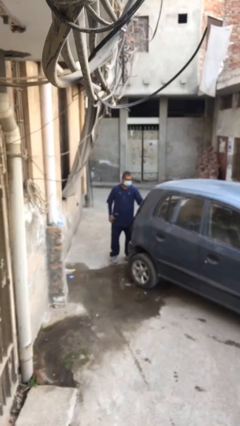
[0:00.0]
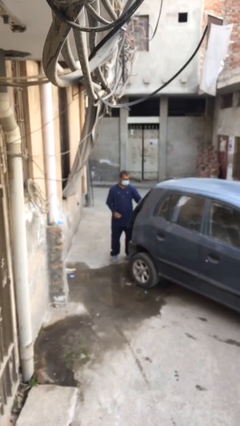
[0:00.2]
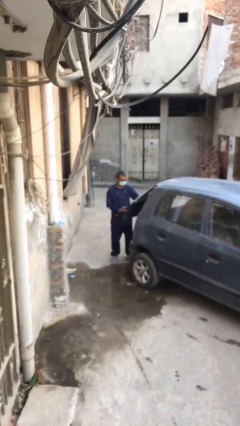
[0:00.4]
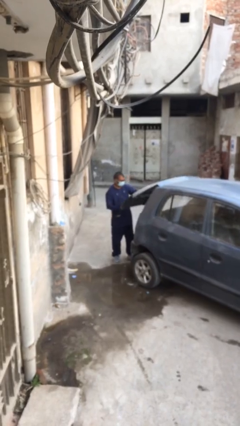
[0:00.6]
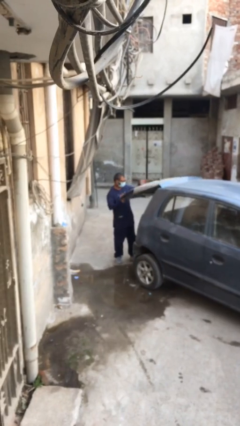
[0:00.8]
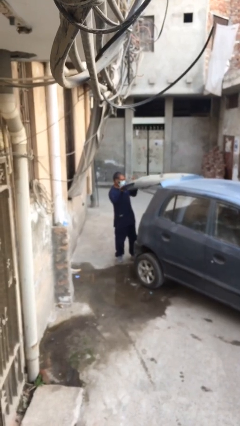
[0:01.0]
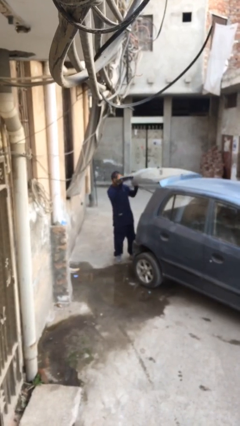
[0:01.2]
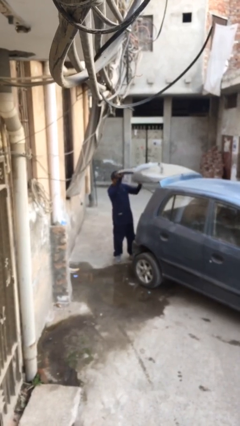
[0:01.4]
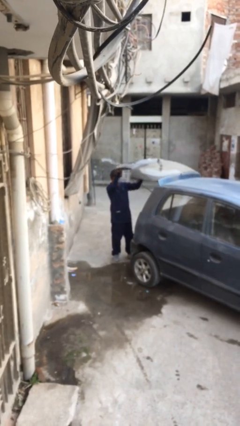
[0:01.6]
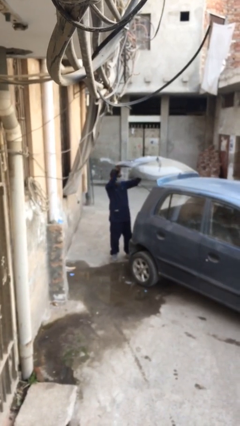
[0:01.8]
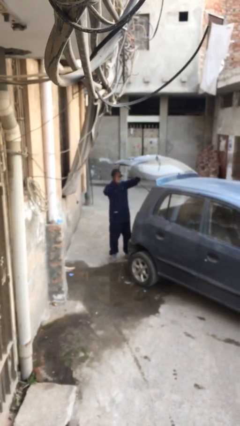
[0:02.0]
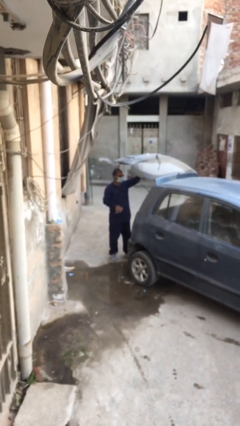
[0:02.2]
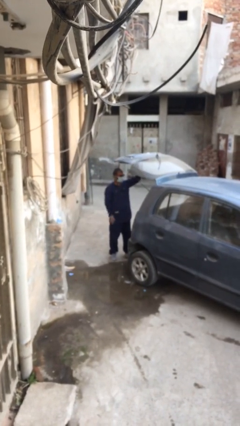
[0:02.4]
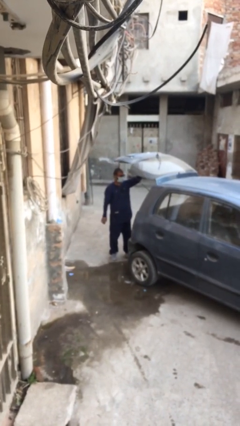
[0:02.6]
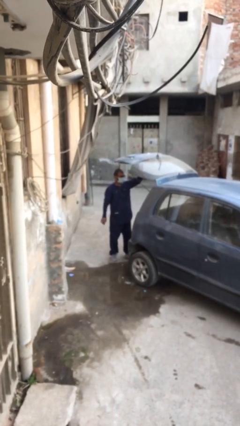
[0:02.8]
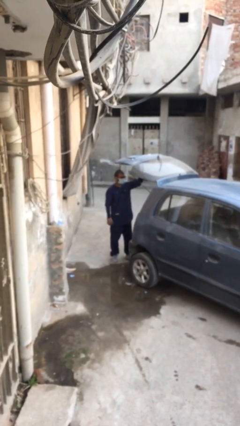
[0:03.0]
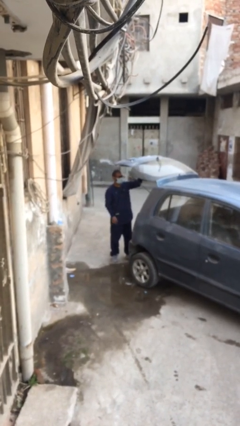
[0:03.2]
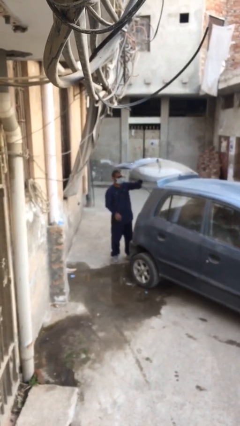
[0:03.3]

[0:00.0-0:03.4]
person opens car trunk

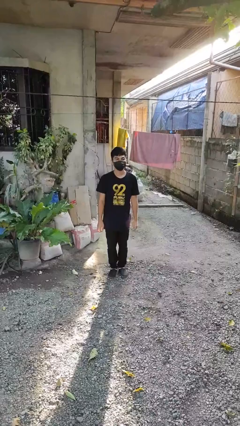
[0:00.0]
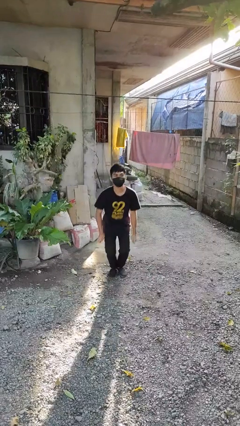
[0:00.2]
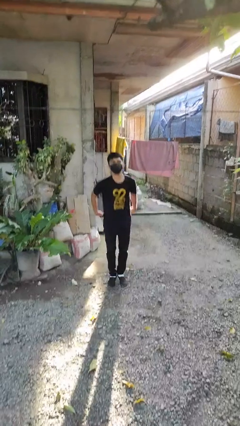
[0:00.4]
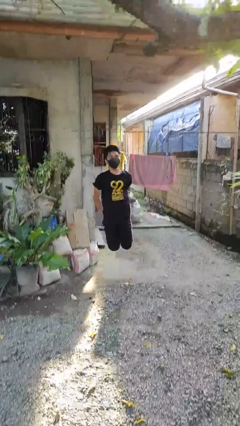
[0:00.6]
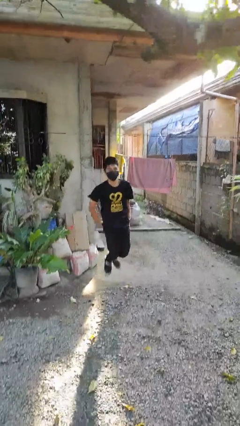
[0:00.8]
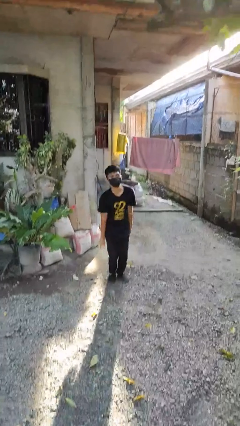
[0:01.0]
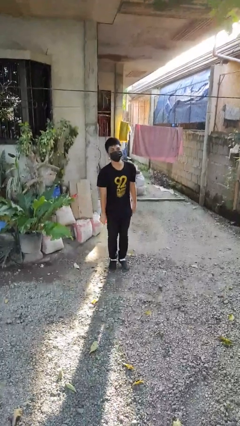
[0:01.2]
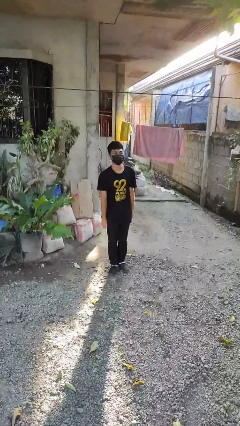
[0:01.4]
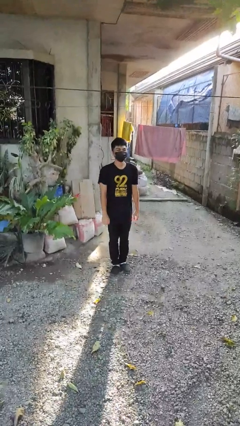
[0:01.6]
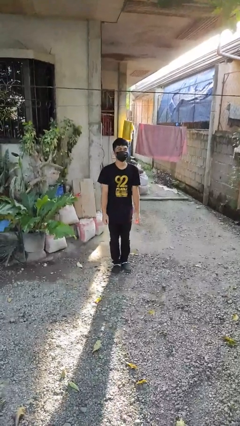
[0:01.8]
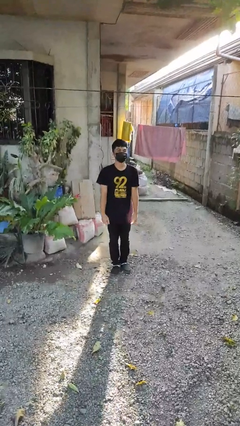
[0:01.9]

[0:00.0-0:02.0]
person jumps

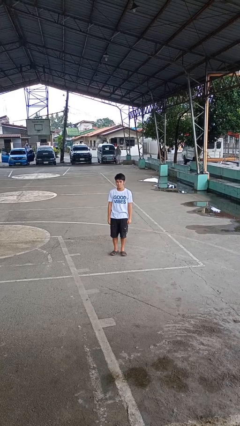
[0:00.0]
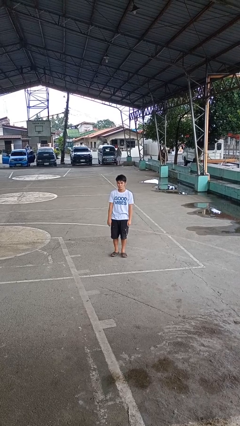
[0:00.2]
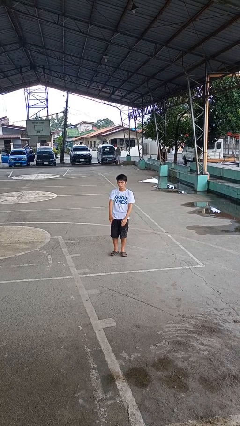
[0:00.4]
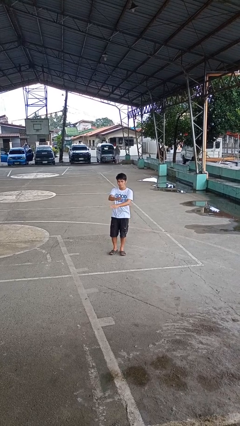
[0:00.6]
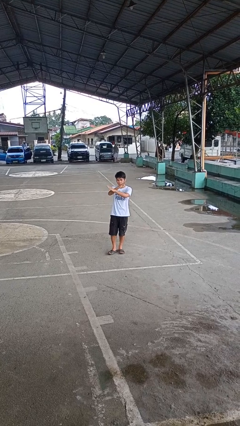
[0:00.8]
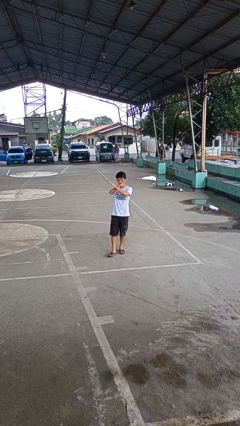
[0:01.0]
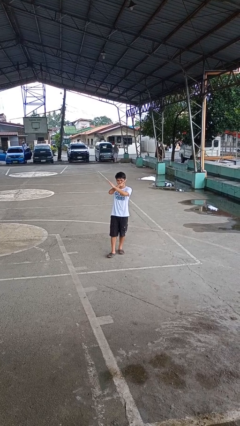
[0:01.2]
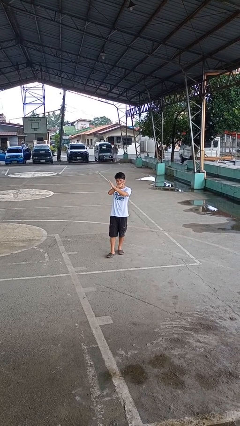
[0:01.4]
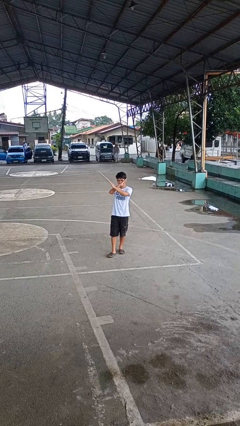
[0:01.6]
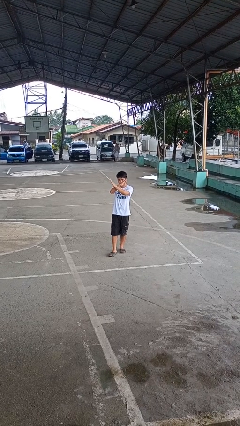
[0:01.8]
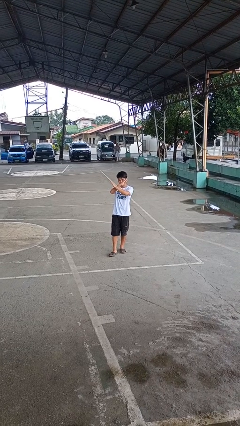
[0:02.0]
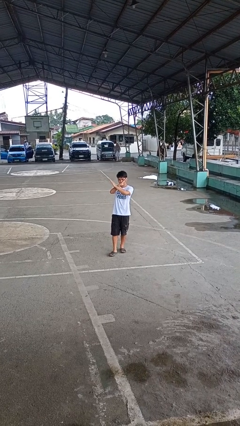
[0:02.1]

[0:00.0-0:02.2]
person gestures arms x

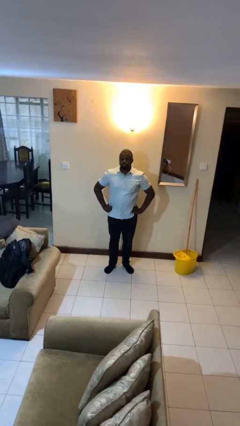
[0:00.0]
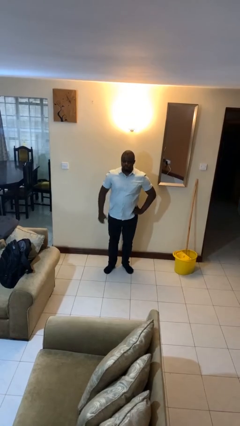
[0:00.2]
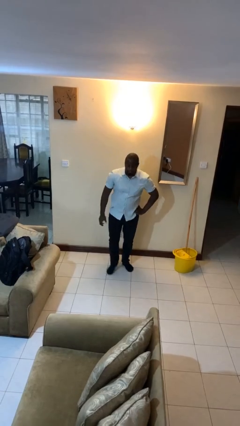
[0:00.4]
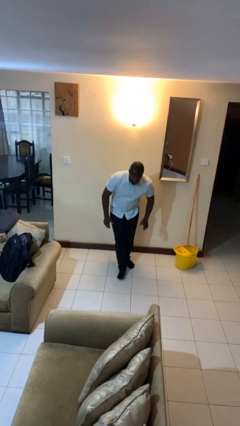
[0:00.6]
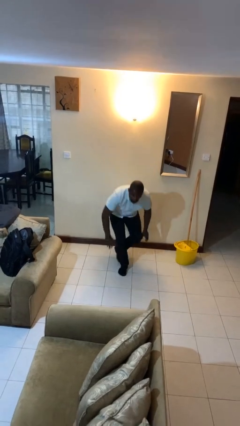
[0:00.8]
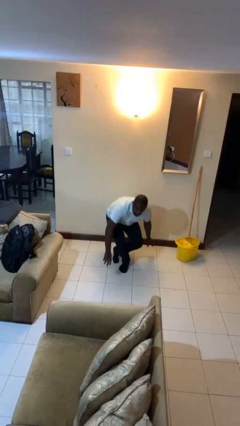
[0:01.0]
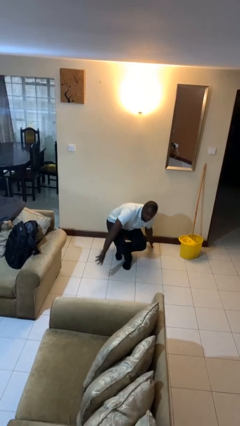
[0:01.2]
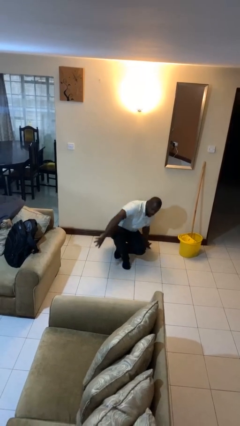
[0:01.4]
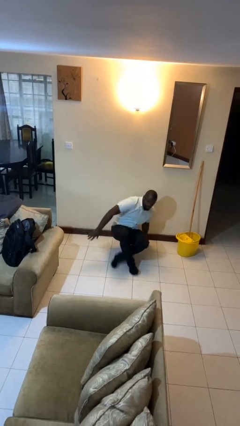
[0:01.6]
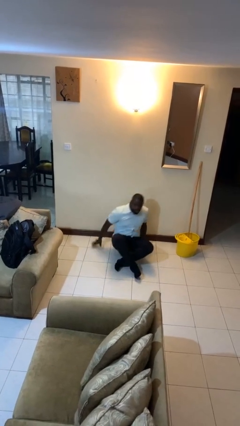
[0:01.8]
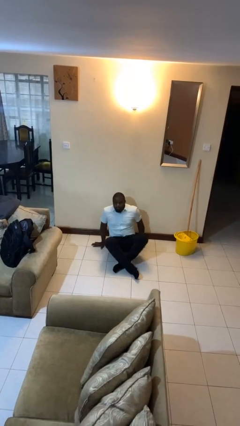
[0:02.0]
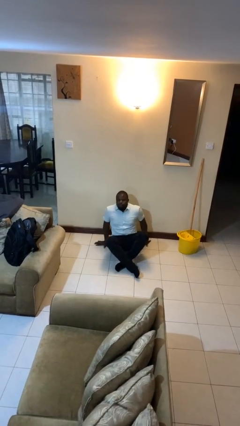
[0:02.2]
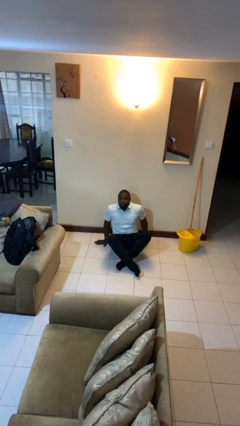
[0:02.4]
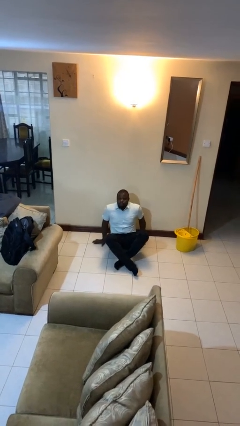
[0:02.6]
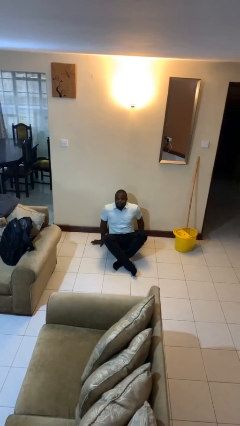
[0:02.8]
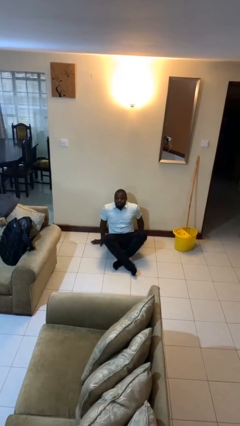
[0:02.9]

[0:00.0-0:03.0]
person sits crisscross

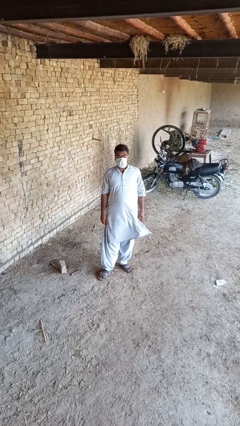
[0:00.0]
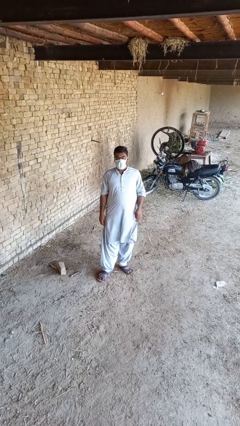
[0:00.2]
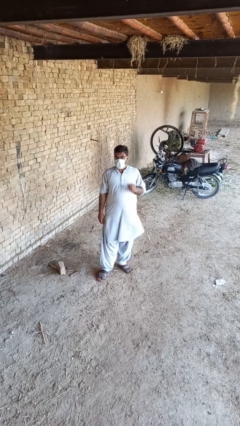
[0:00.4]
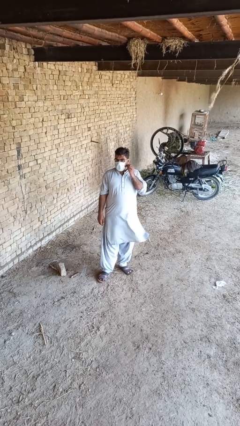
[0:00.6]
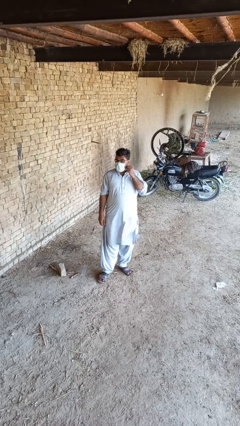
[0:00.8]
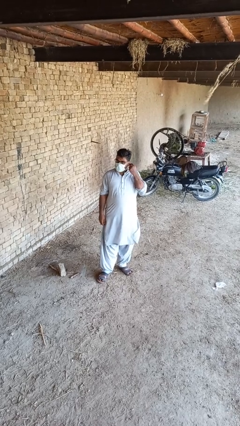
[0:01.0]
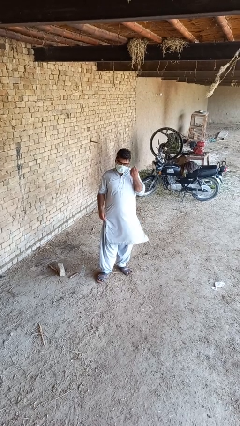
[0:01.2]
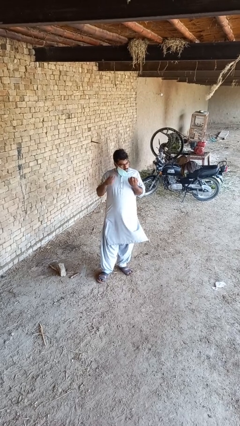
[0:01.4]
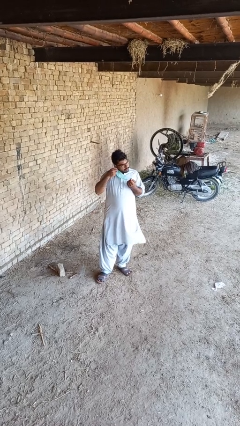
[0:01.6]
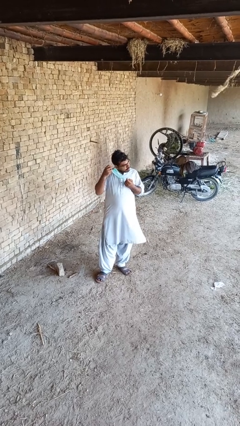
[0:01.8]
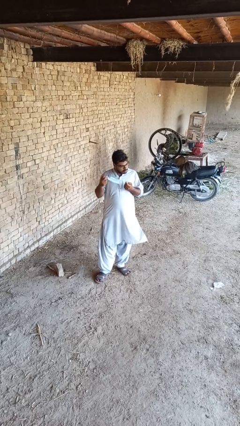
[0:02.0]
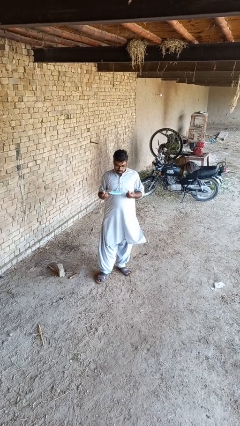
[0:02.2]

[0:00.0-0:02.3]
person takes off facemask

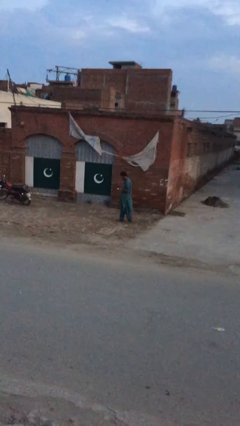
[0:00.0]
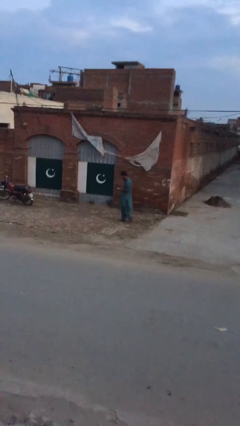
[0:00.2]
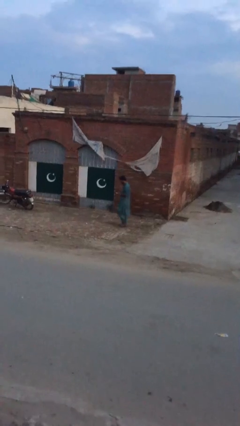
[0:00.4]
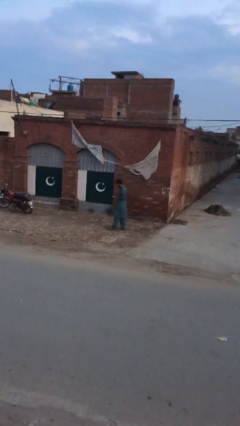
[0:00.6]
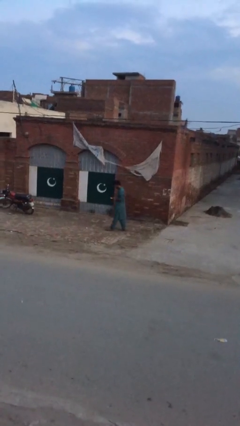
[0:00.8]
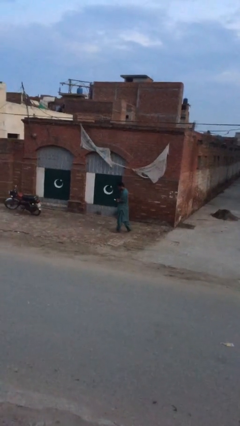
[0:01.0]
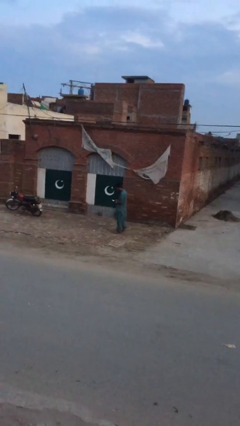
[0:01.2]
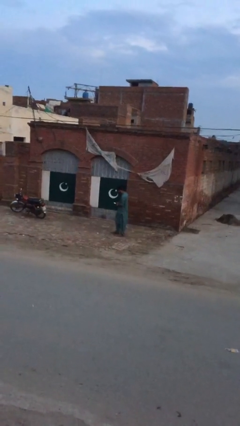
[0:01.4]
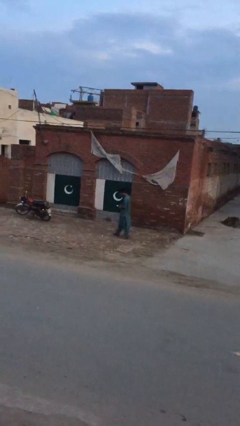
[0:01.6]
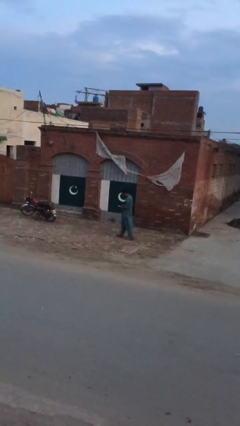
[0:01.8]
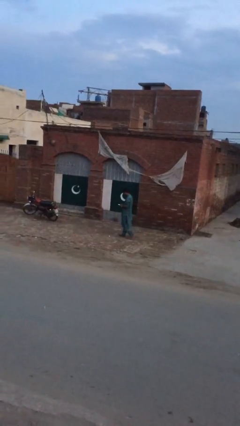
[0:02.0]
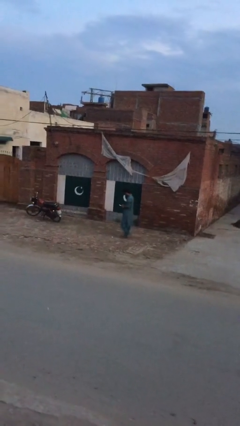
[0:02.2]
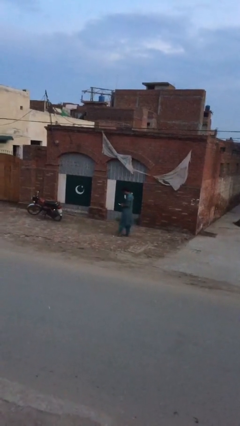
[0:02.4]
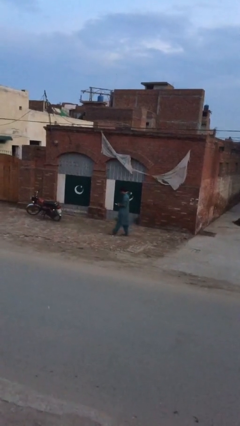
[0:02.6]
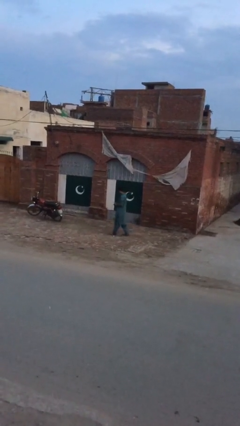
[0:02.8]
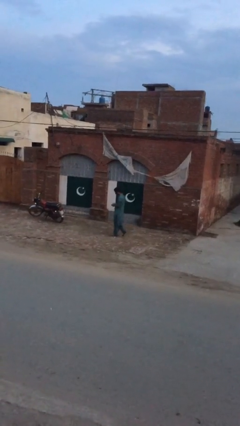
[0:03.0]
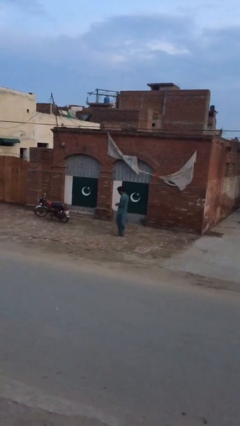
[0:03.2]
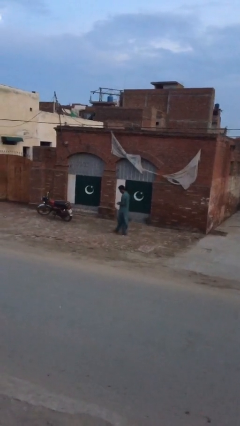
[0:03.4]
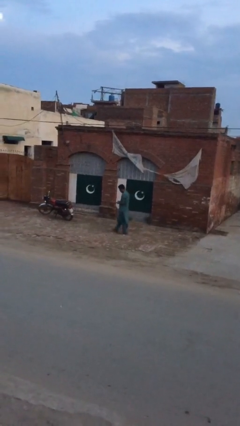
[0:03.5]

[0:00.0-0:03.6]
person texts on phone

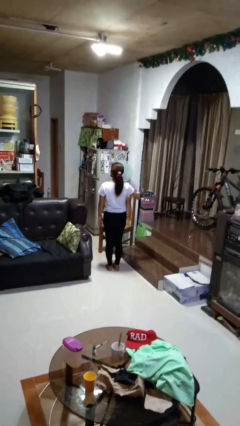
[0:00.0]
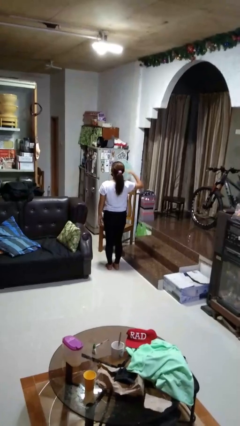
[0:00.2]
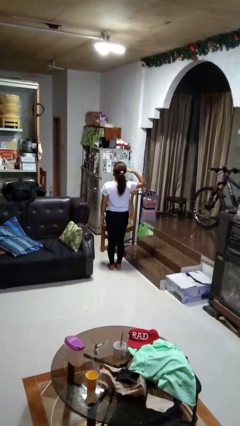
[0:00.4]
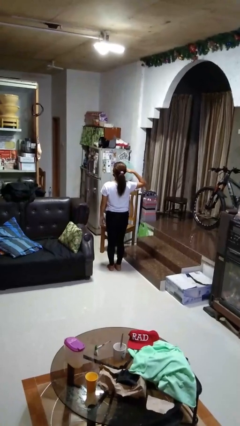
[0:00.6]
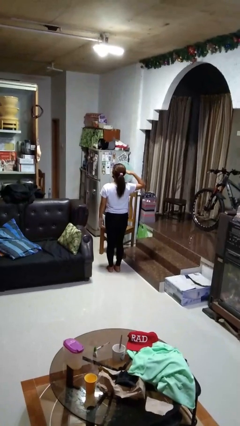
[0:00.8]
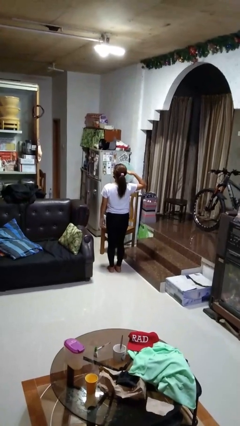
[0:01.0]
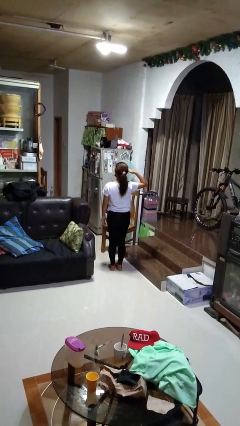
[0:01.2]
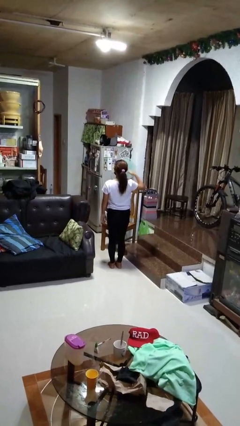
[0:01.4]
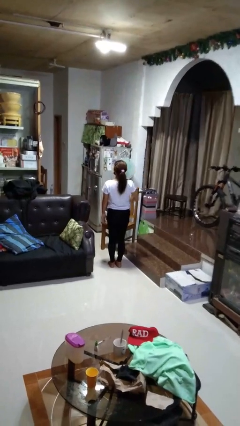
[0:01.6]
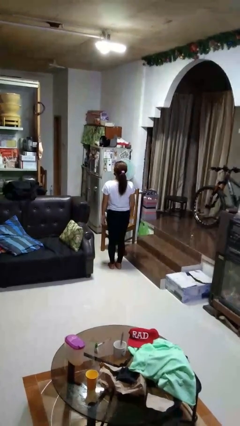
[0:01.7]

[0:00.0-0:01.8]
person salutes
